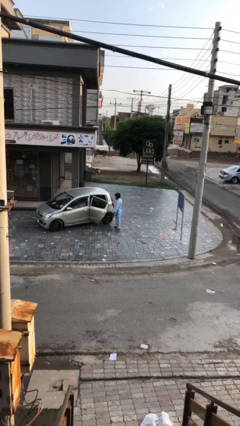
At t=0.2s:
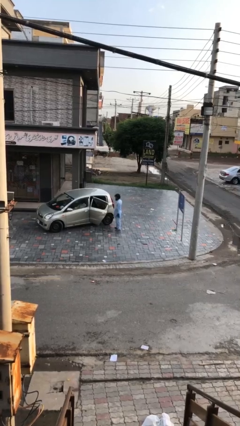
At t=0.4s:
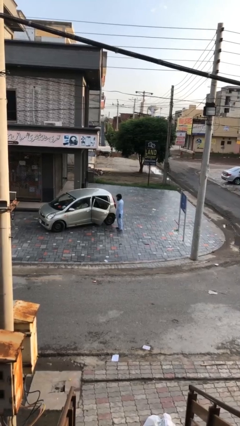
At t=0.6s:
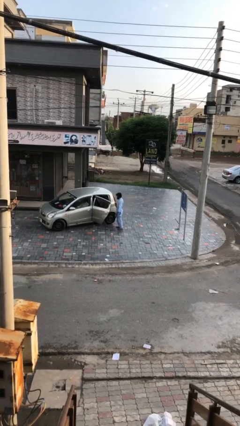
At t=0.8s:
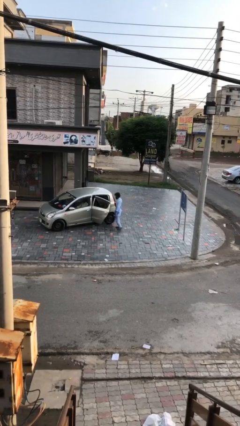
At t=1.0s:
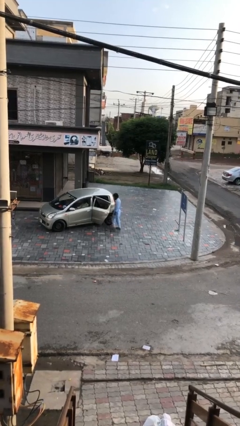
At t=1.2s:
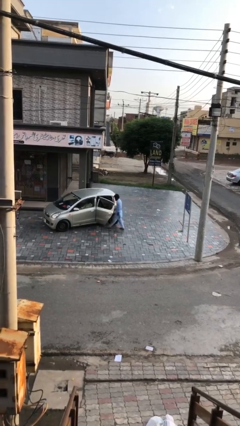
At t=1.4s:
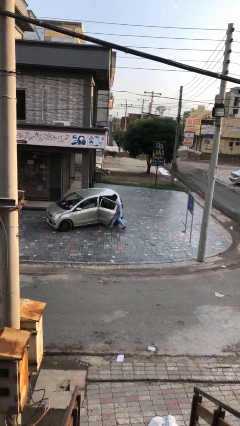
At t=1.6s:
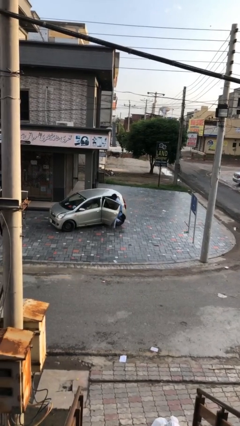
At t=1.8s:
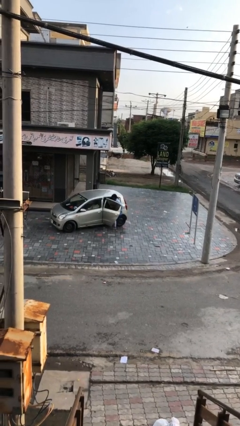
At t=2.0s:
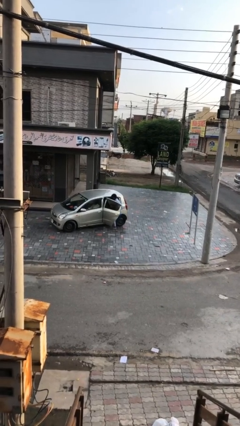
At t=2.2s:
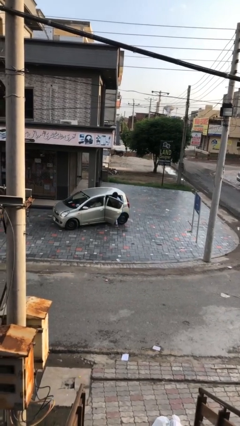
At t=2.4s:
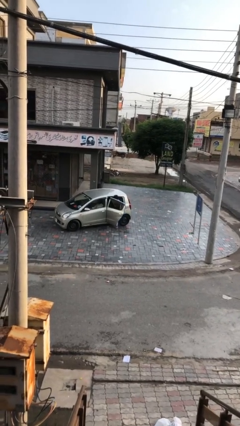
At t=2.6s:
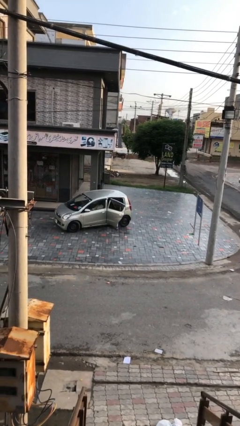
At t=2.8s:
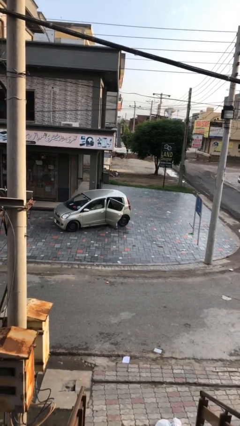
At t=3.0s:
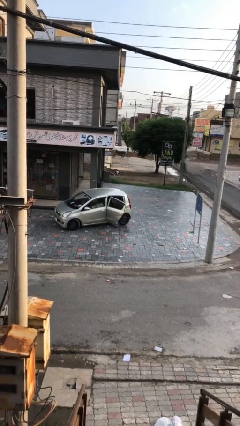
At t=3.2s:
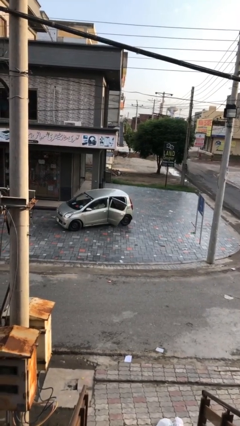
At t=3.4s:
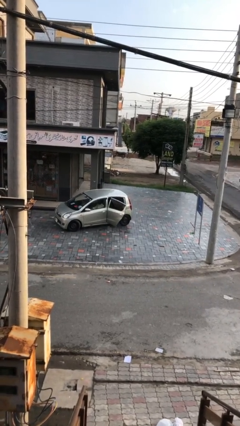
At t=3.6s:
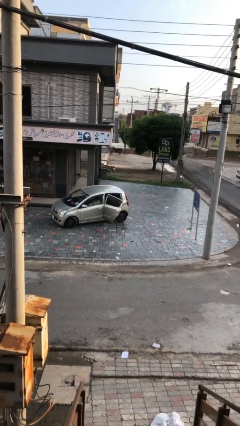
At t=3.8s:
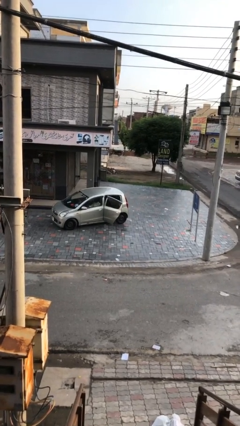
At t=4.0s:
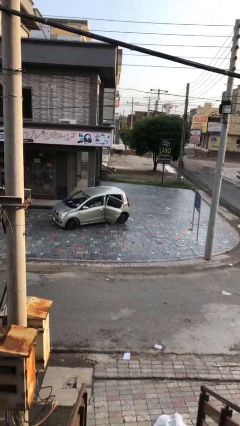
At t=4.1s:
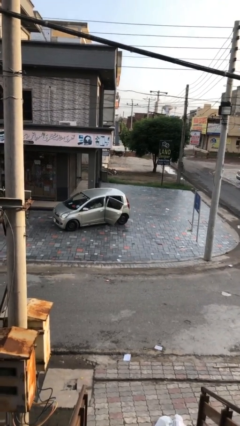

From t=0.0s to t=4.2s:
person enters car

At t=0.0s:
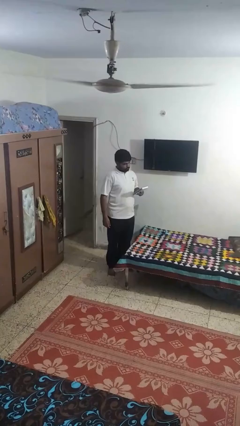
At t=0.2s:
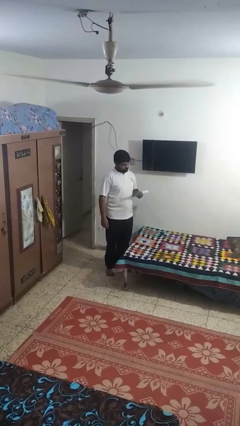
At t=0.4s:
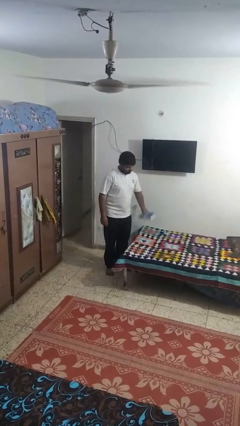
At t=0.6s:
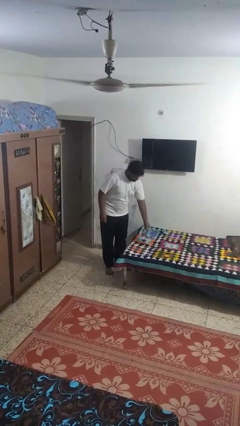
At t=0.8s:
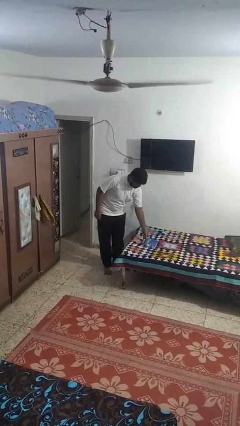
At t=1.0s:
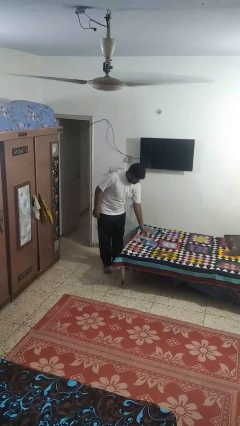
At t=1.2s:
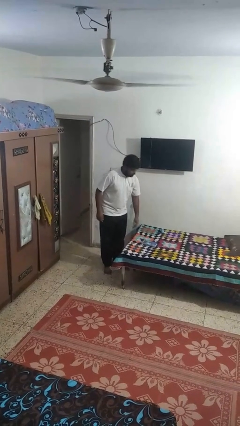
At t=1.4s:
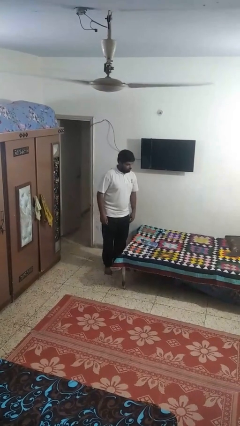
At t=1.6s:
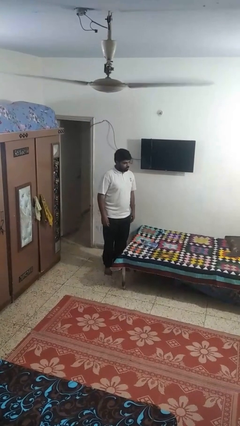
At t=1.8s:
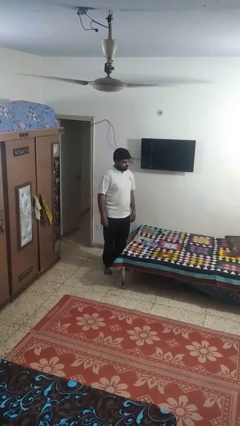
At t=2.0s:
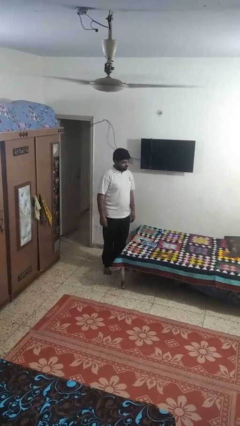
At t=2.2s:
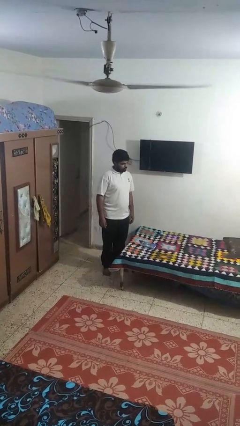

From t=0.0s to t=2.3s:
person puts down object on bed

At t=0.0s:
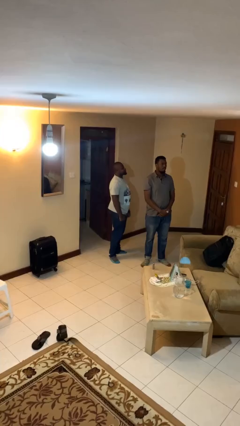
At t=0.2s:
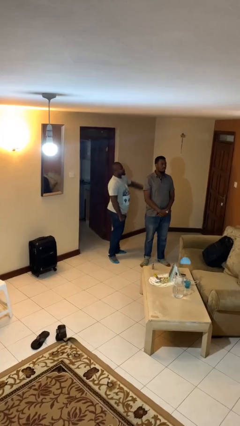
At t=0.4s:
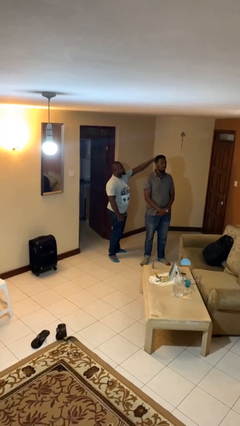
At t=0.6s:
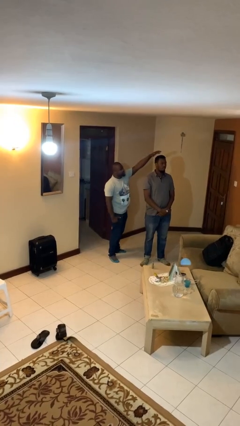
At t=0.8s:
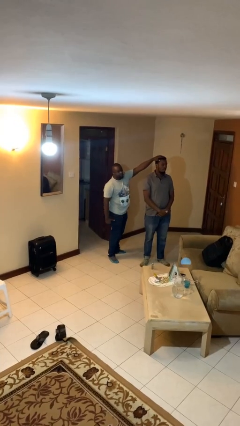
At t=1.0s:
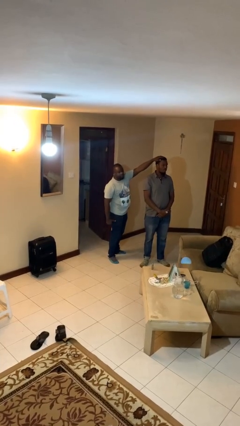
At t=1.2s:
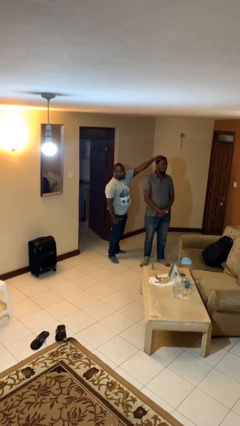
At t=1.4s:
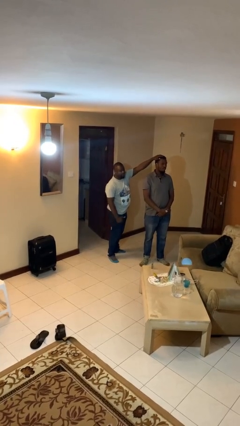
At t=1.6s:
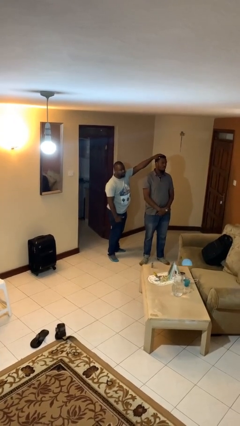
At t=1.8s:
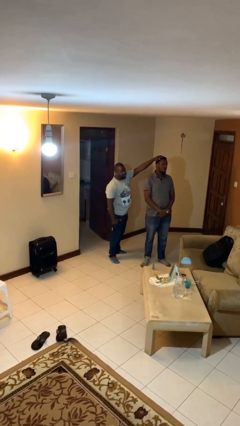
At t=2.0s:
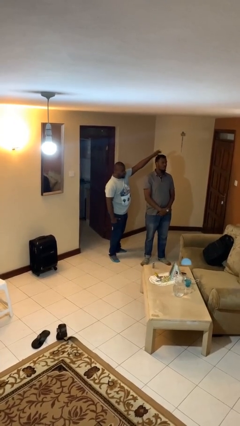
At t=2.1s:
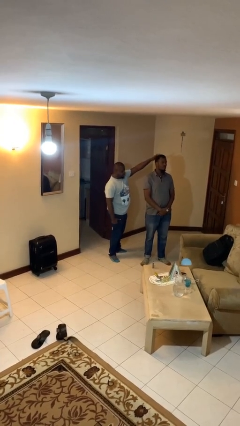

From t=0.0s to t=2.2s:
person grabs person by hair

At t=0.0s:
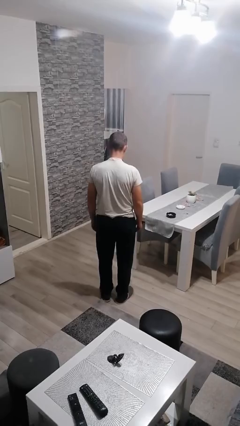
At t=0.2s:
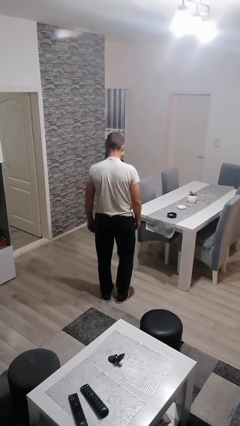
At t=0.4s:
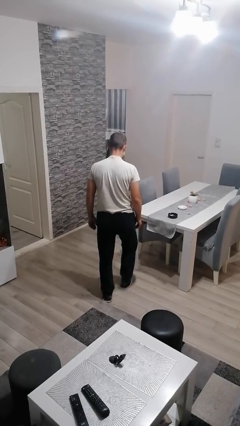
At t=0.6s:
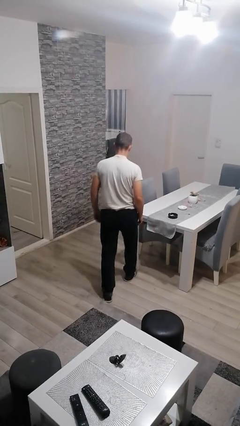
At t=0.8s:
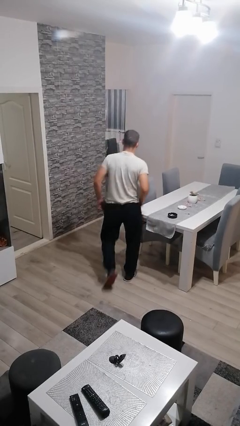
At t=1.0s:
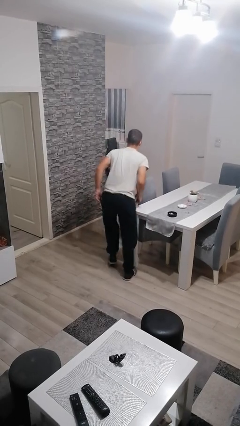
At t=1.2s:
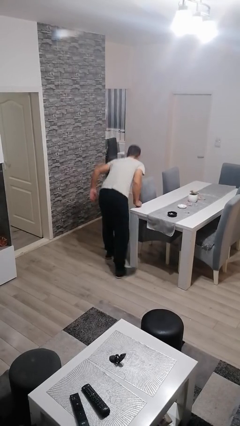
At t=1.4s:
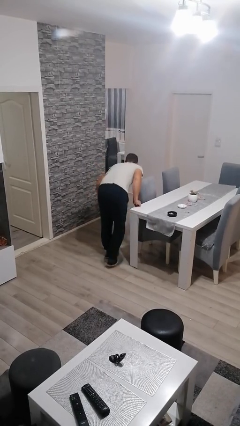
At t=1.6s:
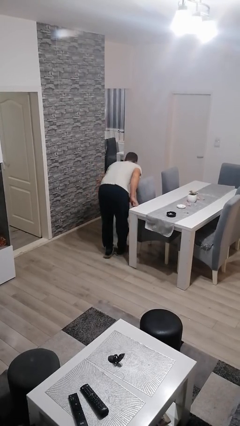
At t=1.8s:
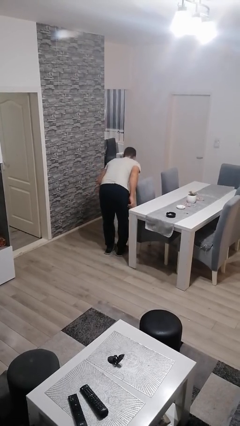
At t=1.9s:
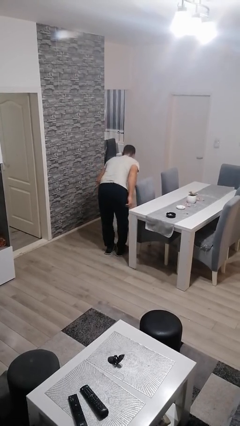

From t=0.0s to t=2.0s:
person bumps into table

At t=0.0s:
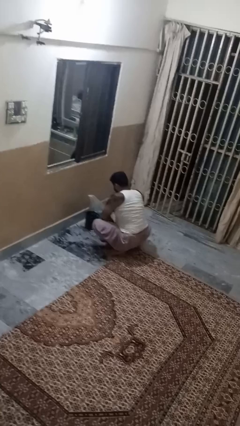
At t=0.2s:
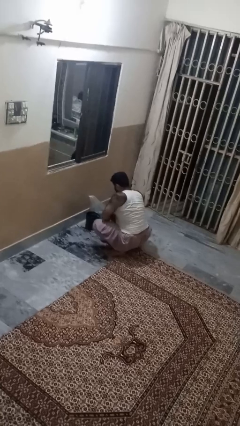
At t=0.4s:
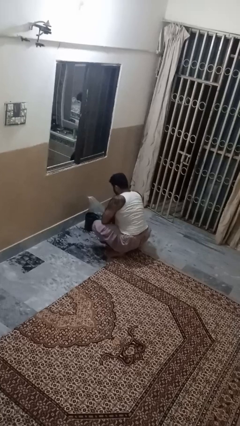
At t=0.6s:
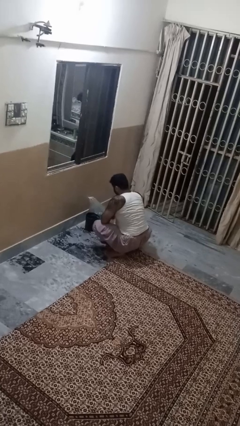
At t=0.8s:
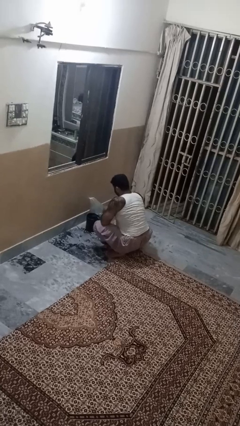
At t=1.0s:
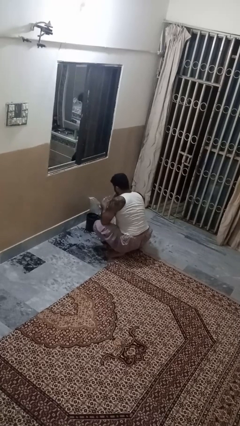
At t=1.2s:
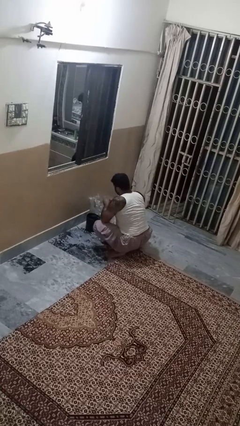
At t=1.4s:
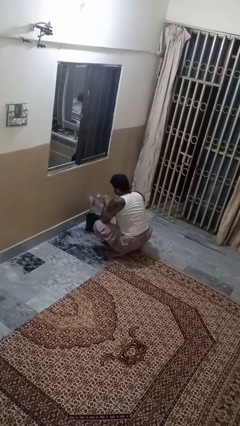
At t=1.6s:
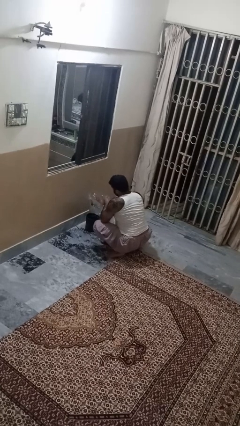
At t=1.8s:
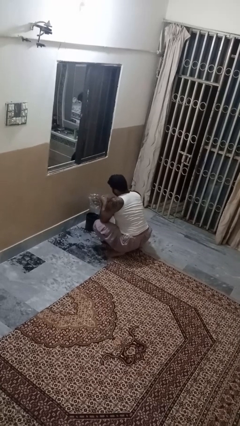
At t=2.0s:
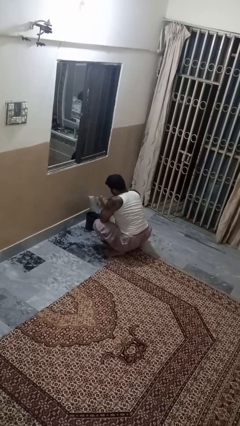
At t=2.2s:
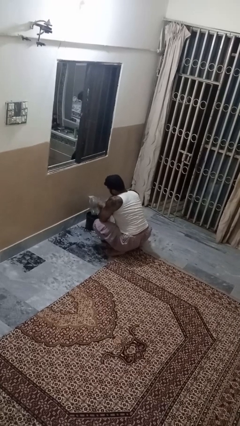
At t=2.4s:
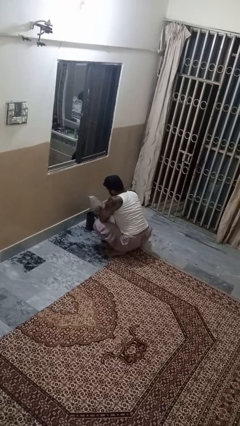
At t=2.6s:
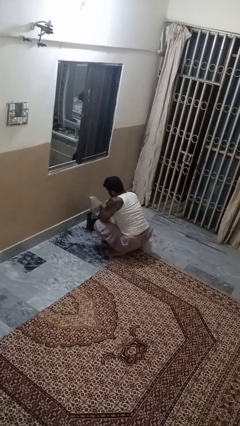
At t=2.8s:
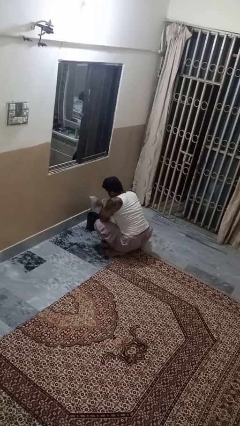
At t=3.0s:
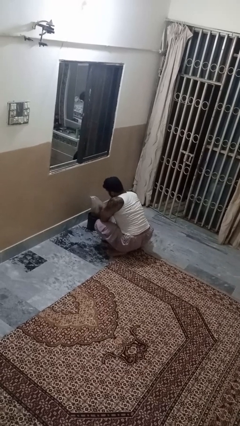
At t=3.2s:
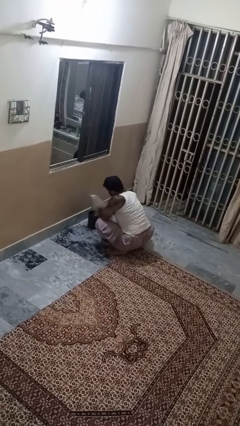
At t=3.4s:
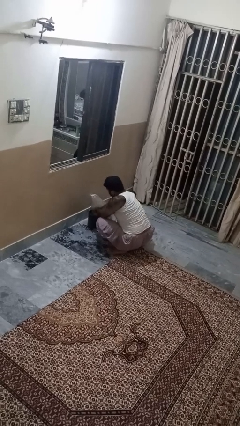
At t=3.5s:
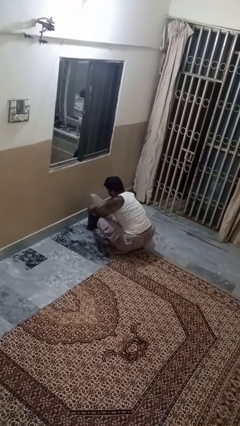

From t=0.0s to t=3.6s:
person inserts trashbag into trashcan

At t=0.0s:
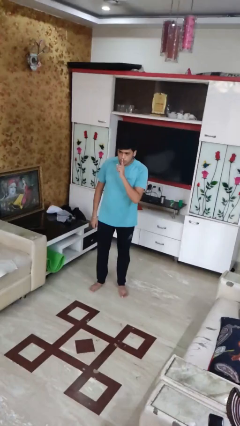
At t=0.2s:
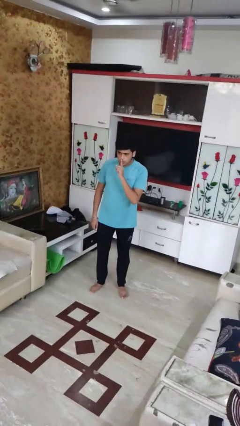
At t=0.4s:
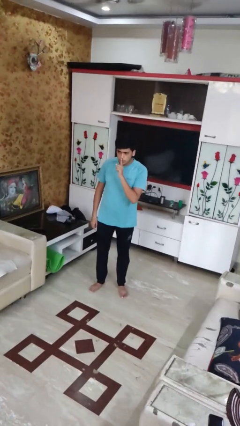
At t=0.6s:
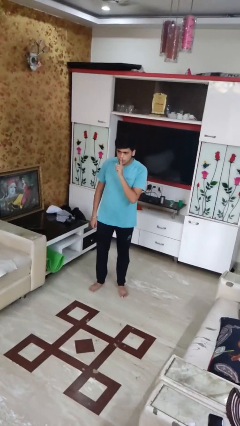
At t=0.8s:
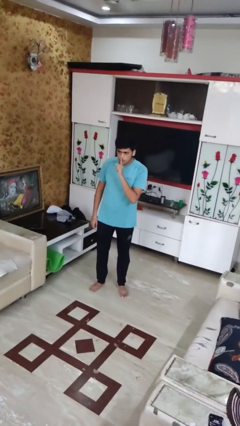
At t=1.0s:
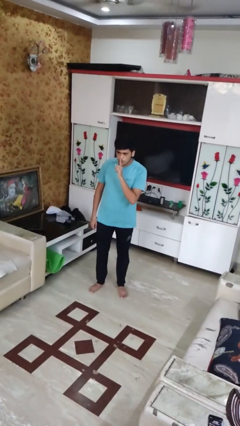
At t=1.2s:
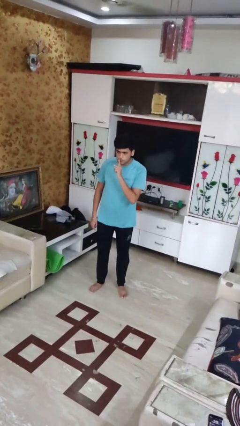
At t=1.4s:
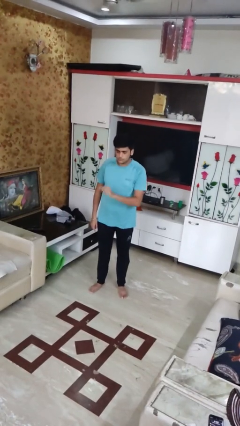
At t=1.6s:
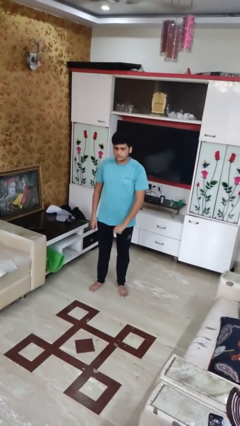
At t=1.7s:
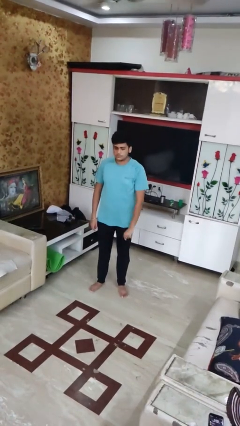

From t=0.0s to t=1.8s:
person gestures be quiet

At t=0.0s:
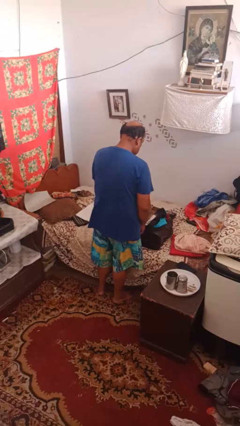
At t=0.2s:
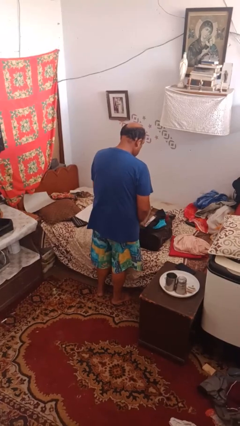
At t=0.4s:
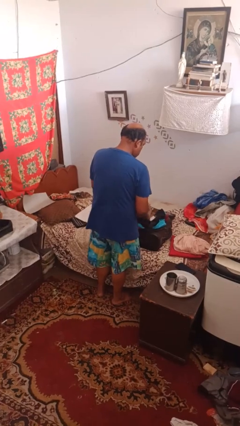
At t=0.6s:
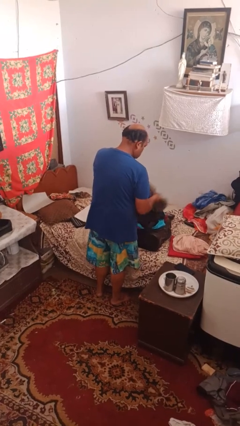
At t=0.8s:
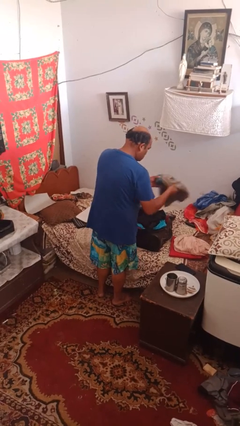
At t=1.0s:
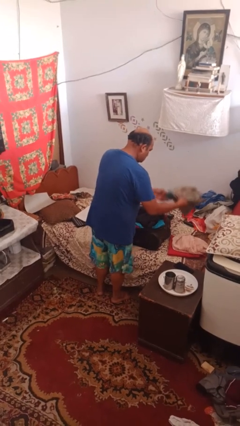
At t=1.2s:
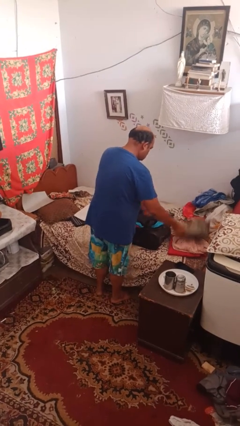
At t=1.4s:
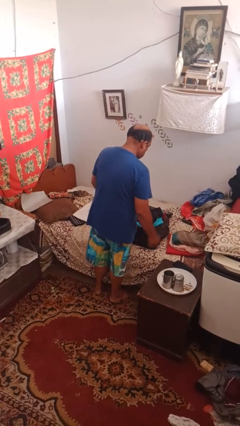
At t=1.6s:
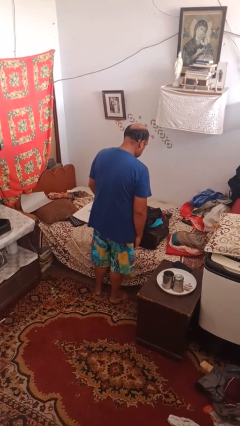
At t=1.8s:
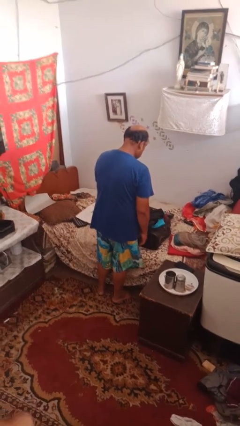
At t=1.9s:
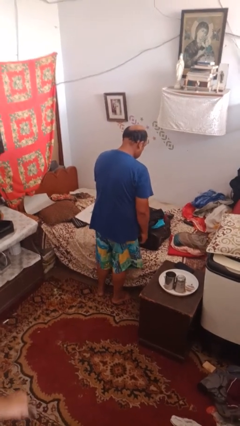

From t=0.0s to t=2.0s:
person unloads clothes from suitcase
